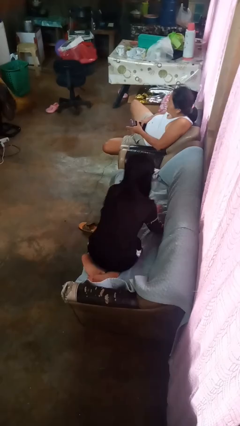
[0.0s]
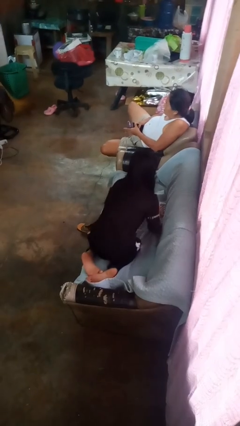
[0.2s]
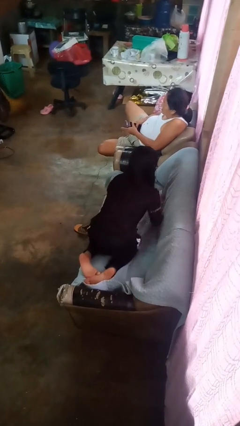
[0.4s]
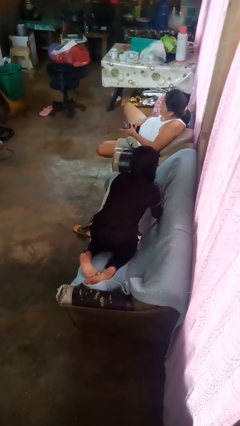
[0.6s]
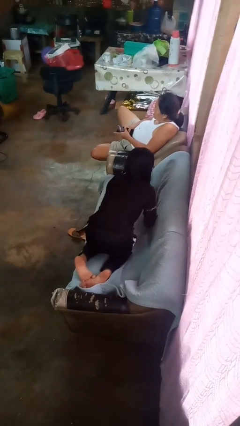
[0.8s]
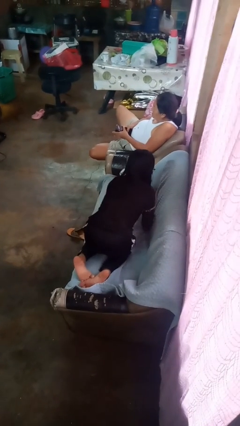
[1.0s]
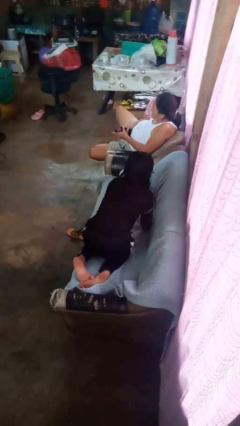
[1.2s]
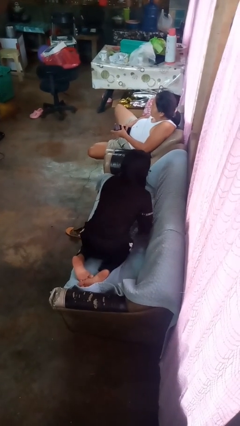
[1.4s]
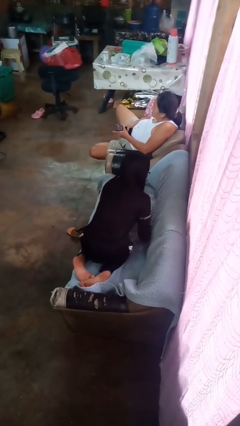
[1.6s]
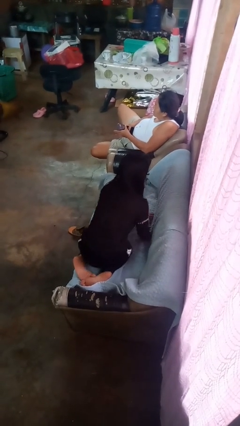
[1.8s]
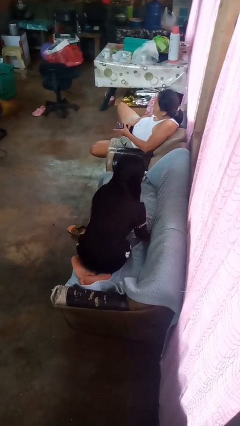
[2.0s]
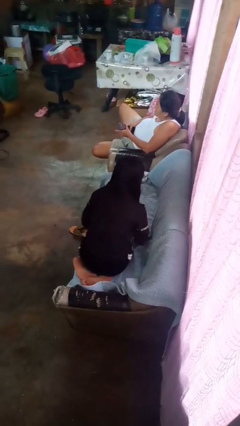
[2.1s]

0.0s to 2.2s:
person searches in couch

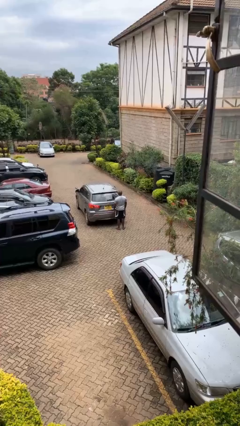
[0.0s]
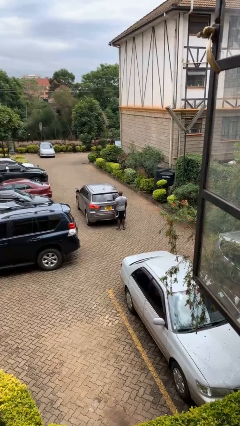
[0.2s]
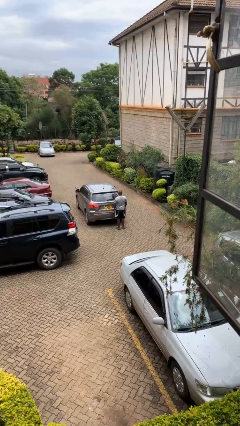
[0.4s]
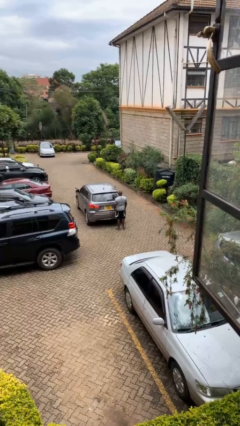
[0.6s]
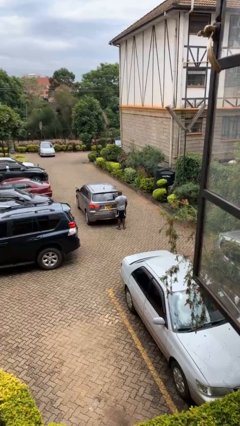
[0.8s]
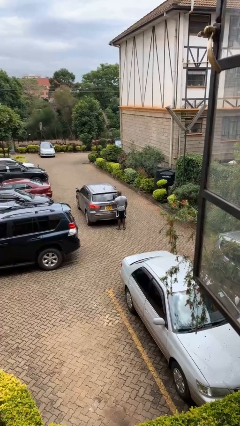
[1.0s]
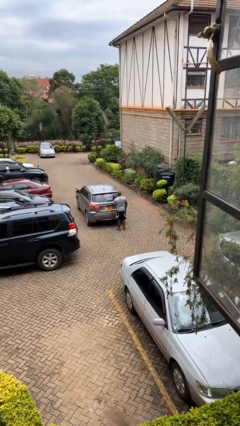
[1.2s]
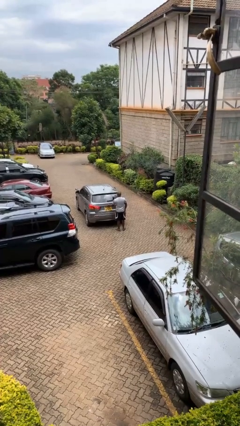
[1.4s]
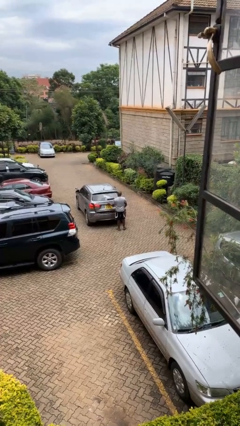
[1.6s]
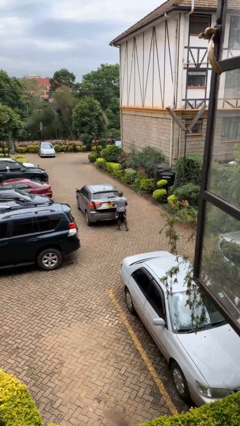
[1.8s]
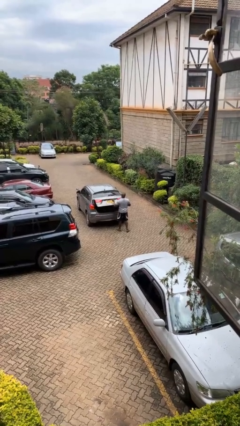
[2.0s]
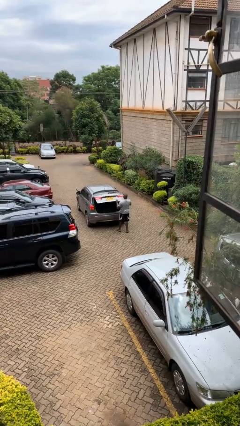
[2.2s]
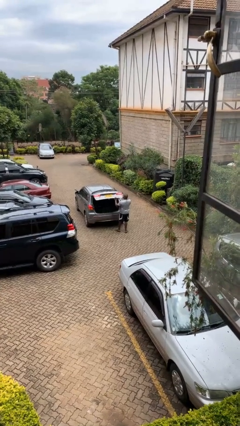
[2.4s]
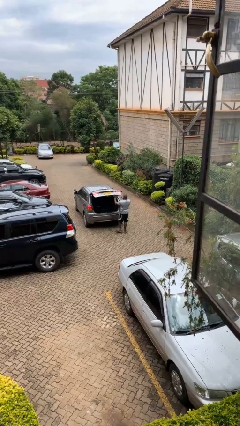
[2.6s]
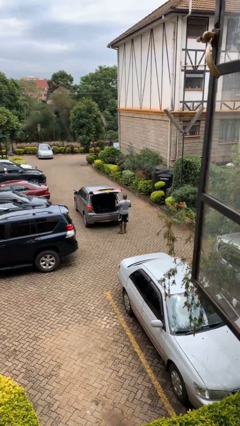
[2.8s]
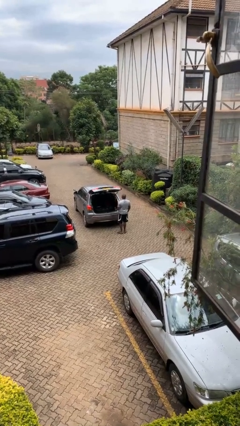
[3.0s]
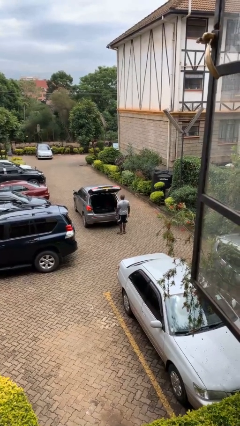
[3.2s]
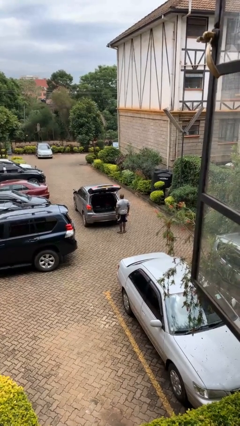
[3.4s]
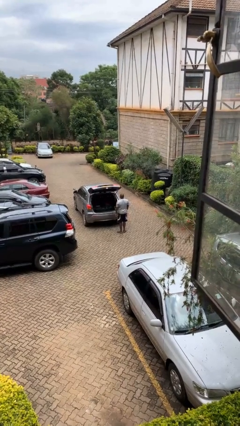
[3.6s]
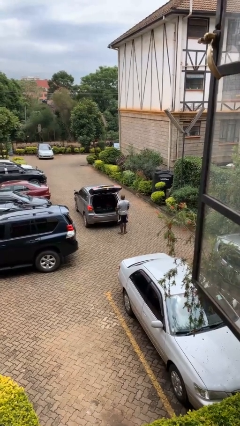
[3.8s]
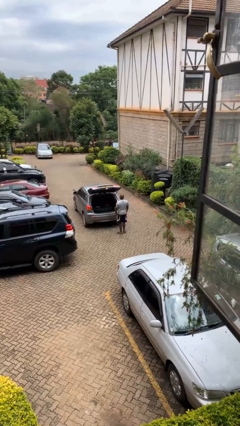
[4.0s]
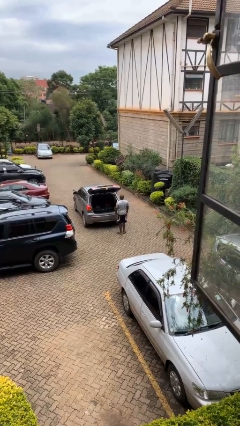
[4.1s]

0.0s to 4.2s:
person opens car trunk

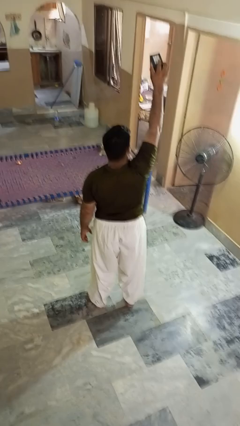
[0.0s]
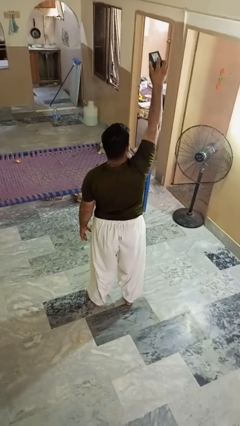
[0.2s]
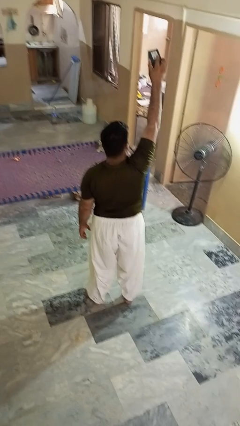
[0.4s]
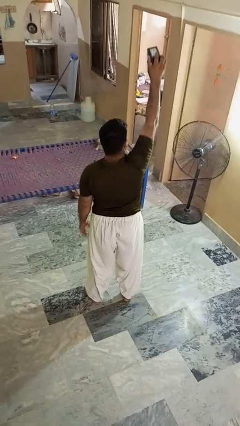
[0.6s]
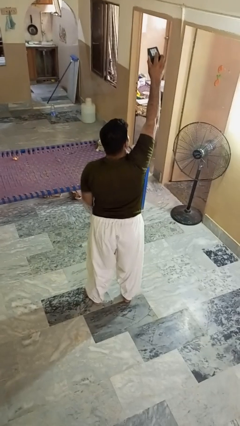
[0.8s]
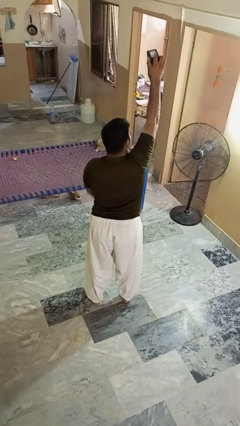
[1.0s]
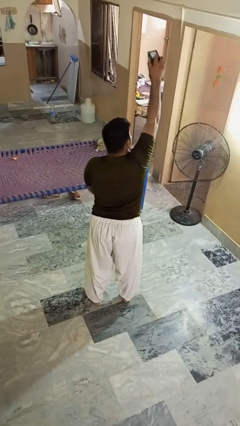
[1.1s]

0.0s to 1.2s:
person drops object

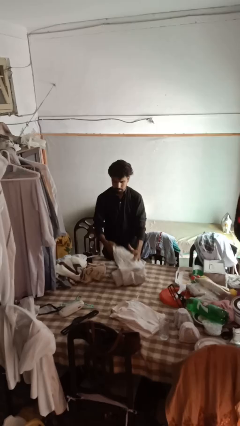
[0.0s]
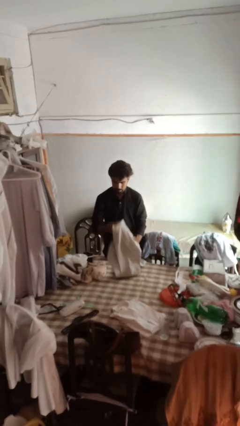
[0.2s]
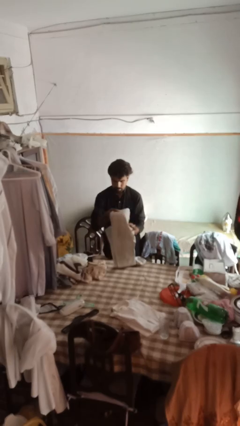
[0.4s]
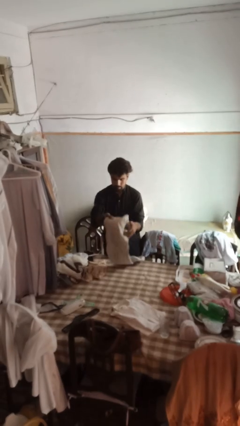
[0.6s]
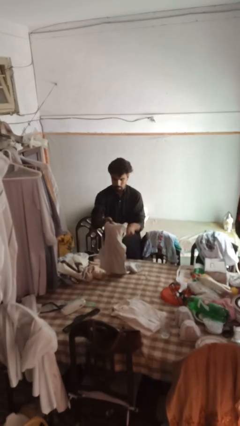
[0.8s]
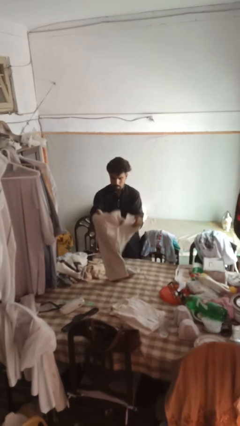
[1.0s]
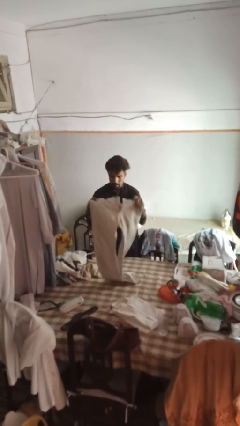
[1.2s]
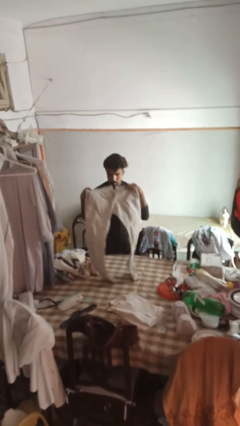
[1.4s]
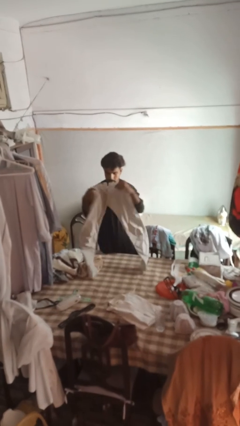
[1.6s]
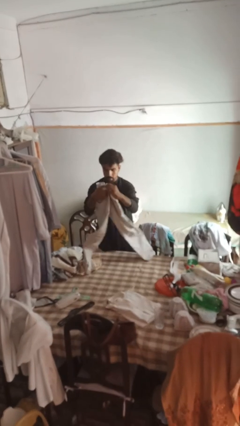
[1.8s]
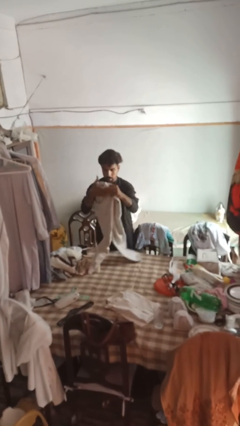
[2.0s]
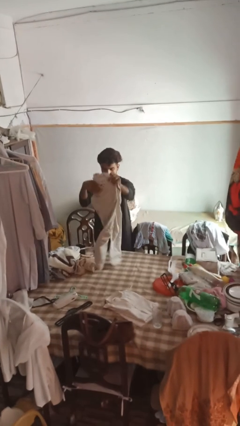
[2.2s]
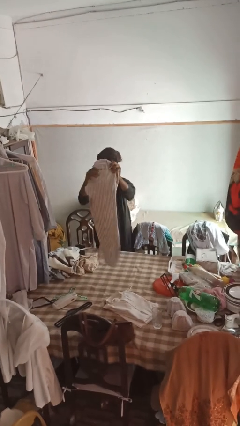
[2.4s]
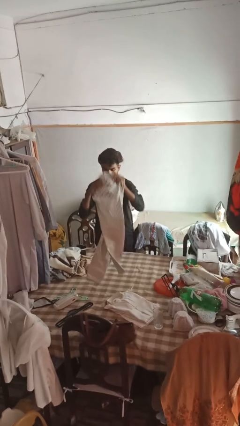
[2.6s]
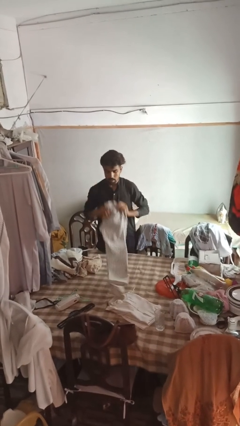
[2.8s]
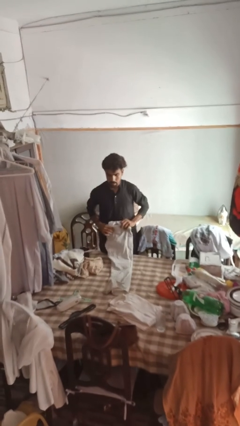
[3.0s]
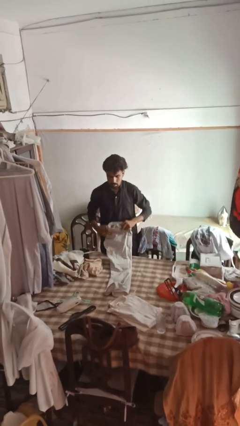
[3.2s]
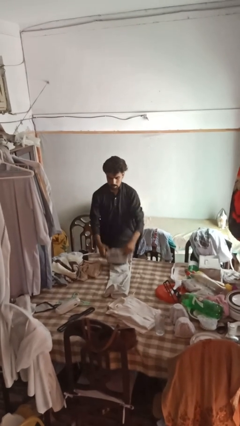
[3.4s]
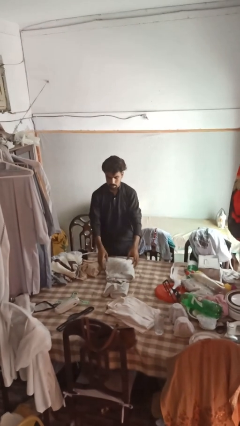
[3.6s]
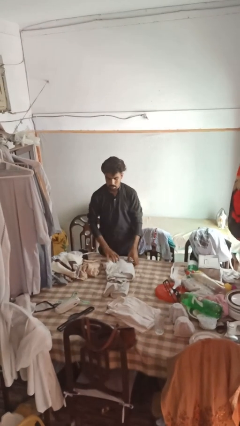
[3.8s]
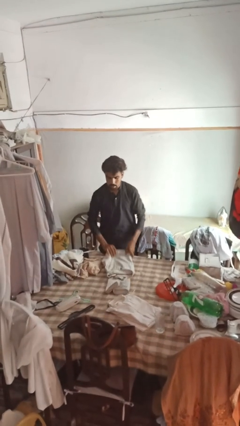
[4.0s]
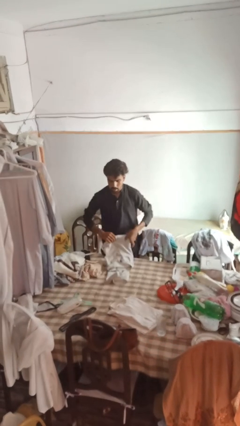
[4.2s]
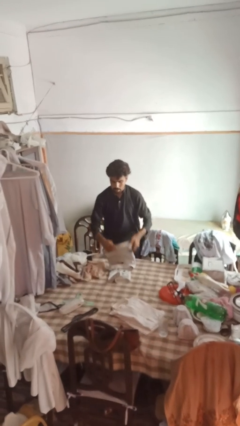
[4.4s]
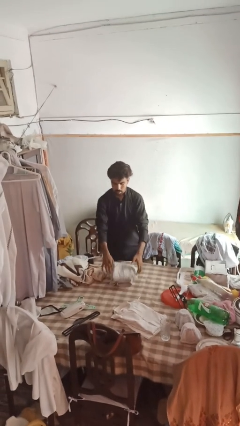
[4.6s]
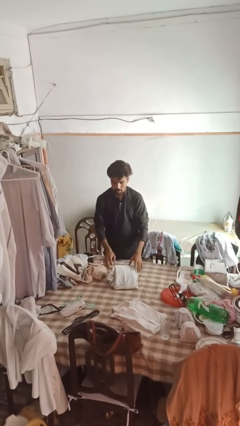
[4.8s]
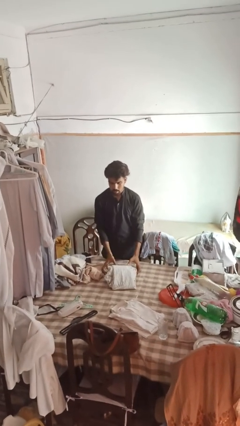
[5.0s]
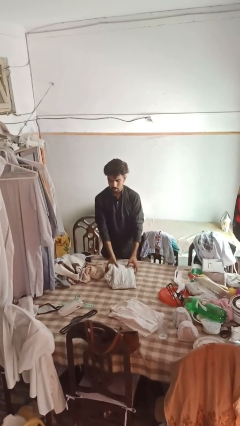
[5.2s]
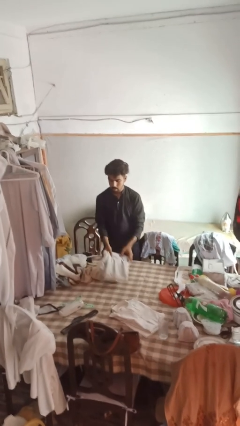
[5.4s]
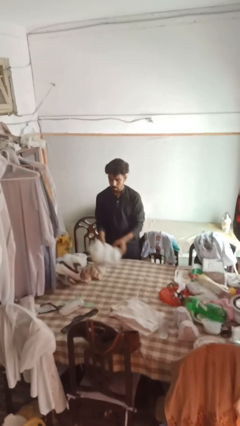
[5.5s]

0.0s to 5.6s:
person folds socks

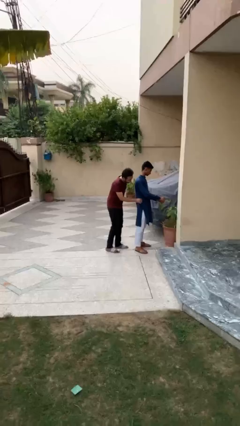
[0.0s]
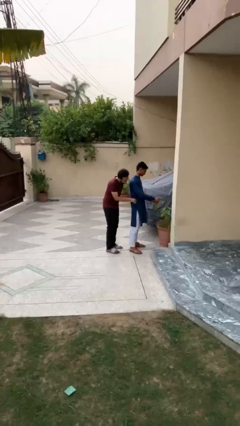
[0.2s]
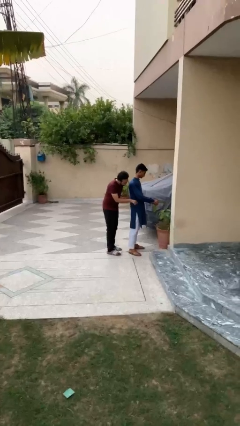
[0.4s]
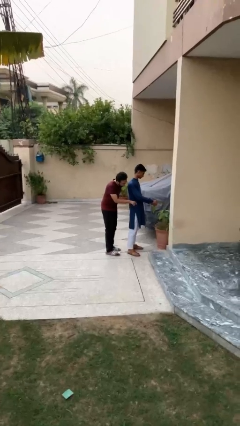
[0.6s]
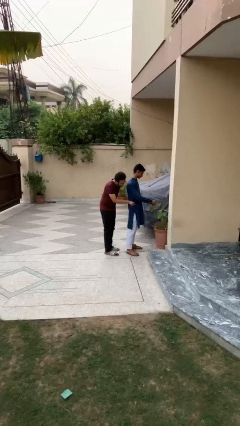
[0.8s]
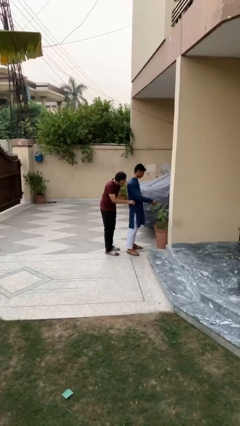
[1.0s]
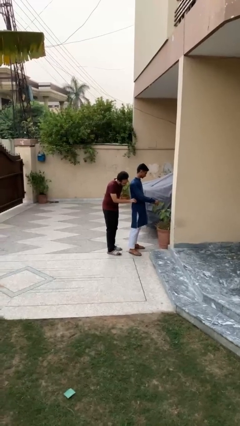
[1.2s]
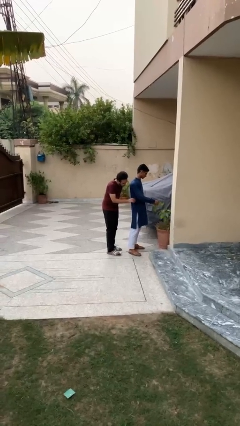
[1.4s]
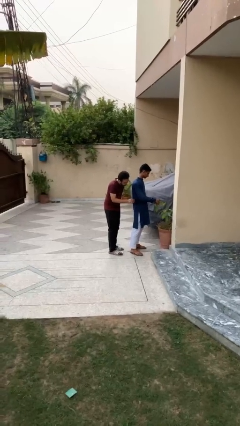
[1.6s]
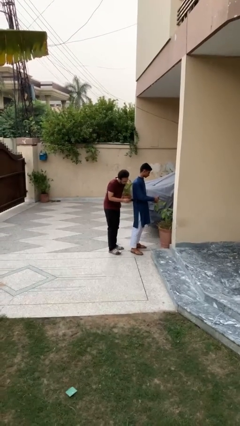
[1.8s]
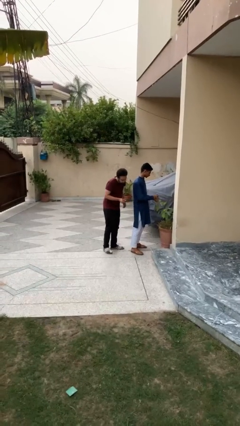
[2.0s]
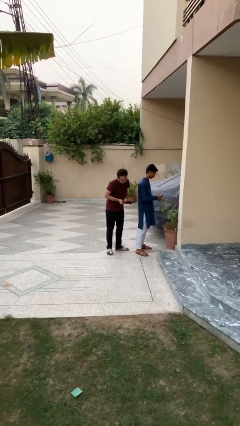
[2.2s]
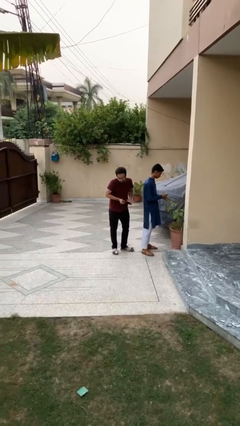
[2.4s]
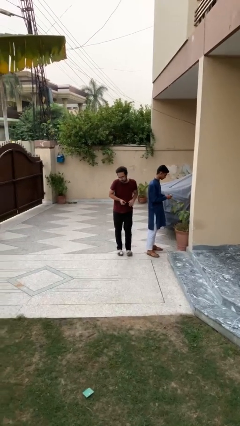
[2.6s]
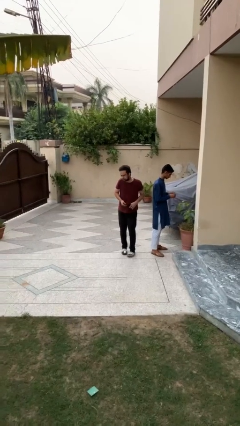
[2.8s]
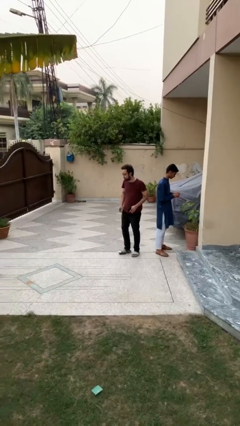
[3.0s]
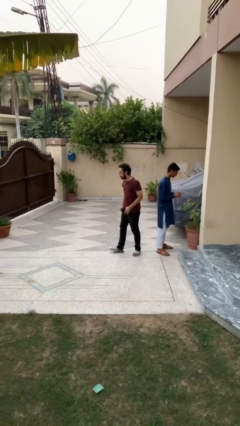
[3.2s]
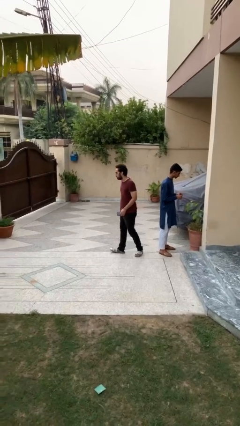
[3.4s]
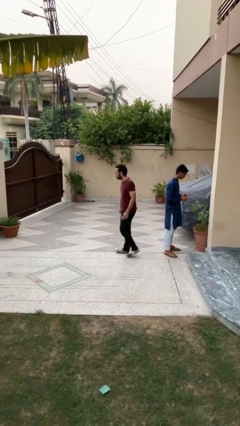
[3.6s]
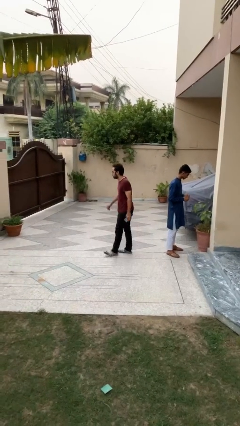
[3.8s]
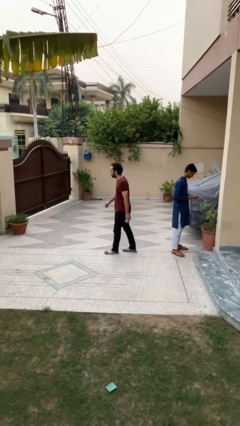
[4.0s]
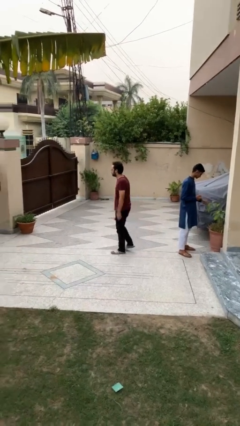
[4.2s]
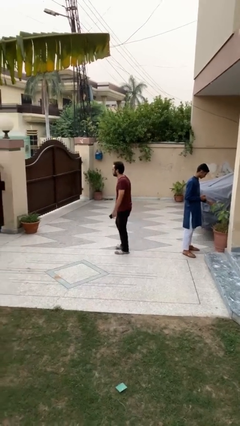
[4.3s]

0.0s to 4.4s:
person steals object from person

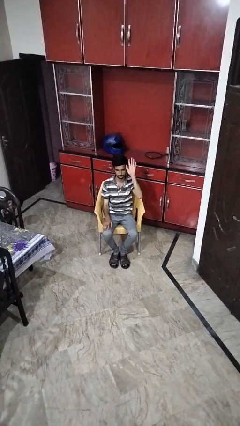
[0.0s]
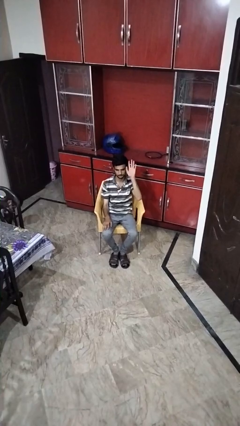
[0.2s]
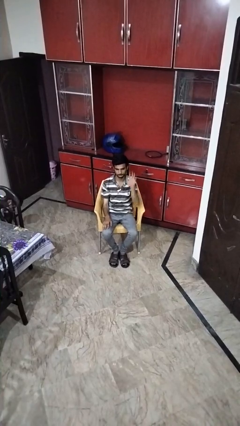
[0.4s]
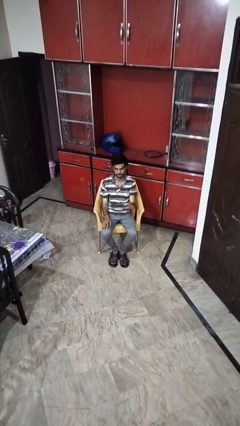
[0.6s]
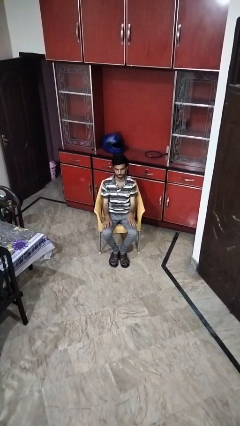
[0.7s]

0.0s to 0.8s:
person gestures lower hand
